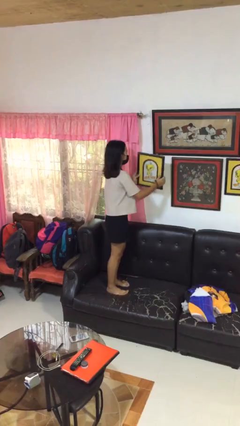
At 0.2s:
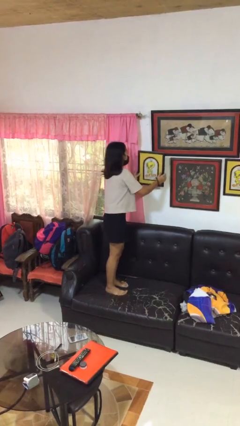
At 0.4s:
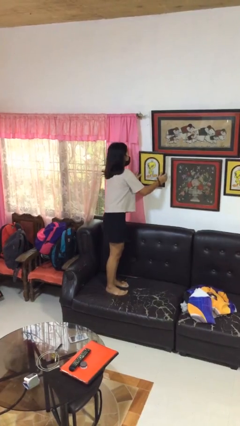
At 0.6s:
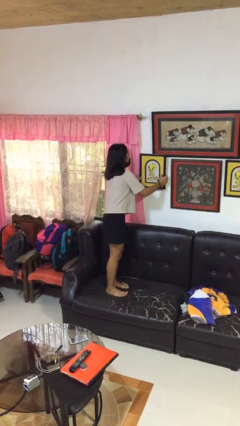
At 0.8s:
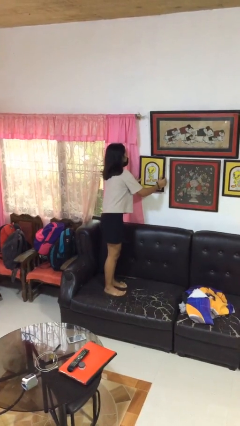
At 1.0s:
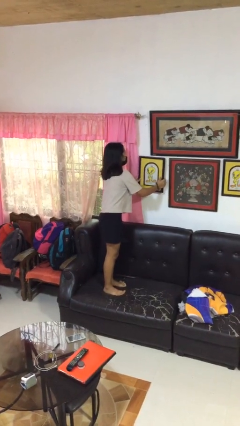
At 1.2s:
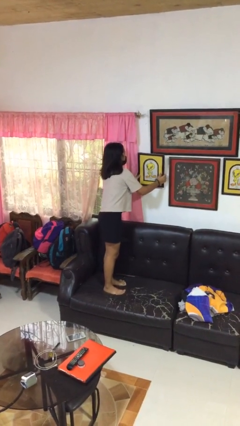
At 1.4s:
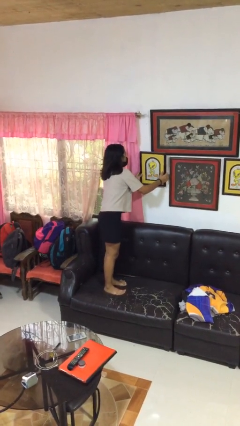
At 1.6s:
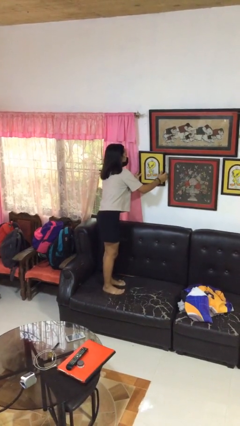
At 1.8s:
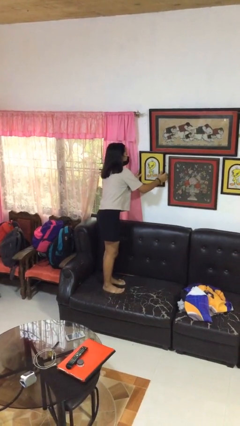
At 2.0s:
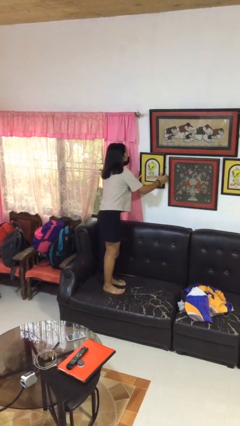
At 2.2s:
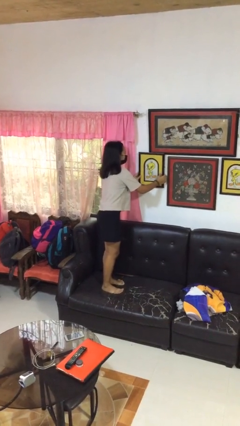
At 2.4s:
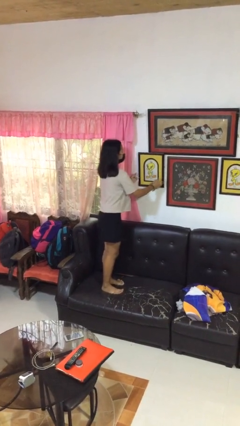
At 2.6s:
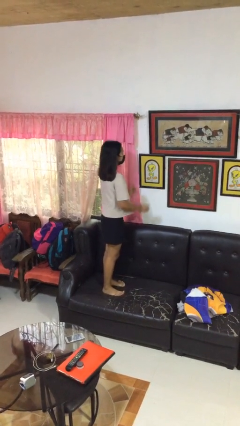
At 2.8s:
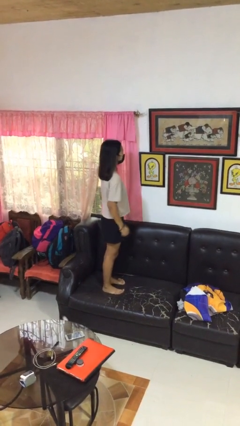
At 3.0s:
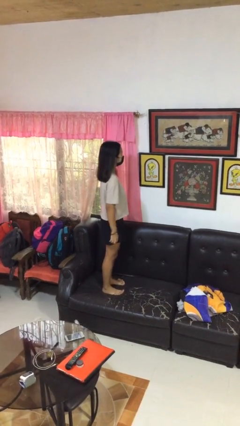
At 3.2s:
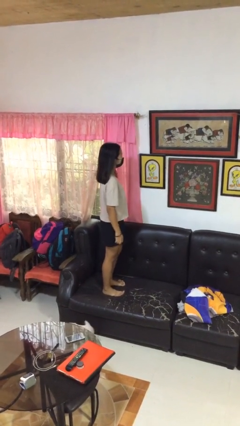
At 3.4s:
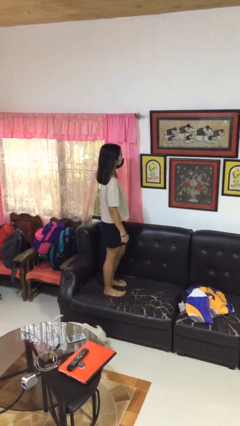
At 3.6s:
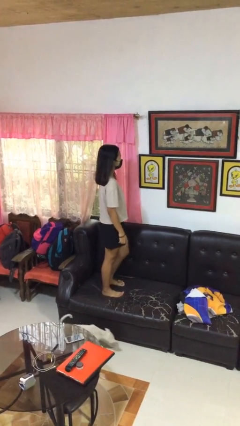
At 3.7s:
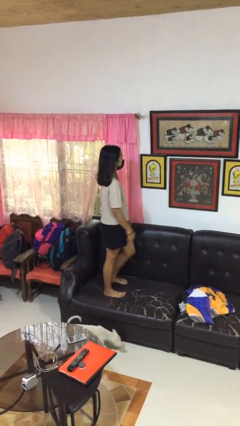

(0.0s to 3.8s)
person puts up picture frame

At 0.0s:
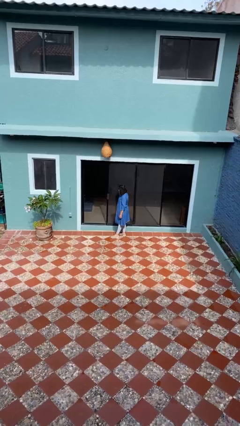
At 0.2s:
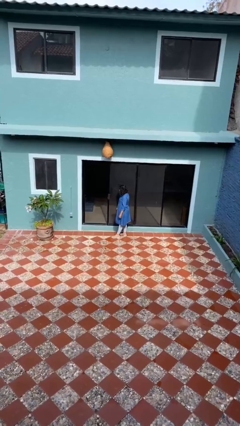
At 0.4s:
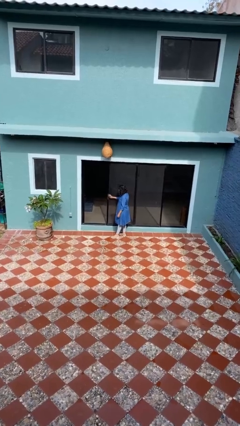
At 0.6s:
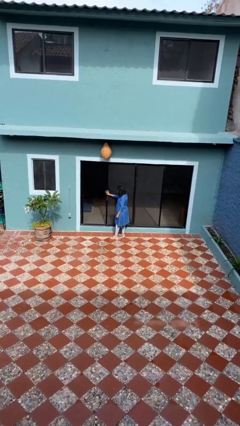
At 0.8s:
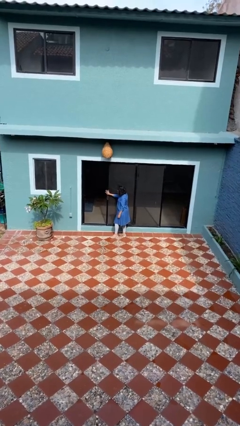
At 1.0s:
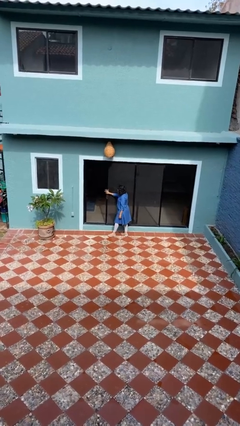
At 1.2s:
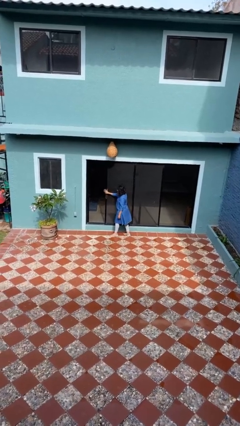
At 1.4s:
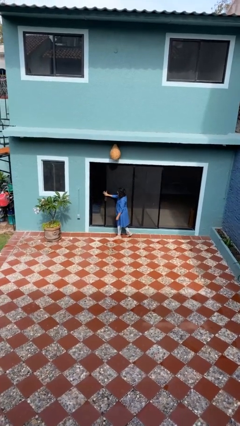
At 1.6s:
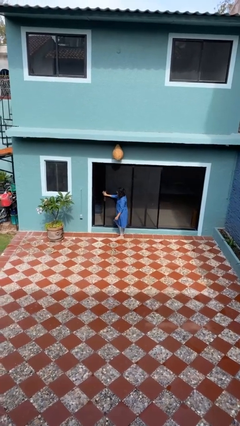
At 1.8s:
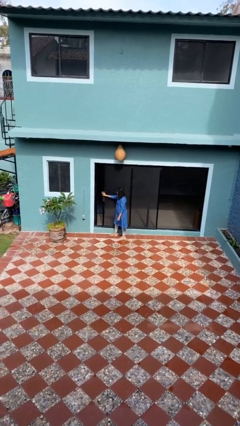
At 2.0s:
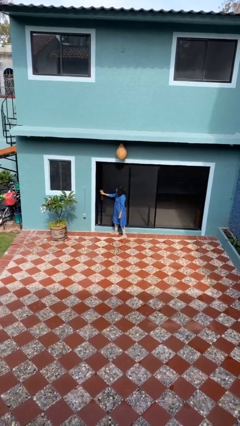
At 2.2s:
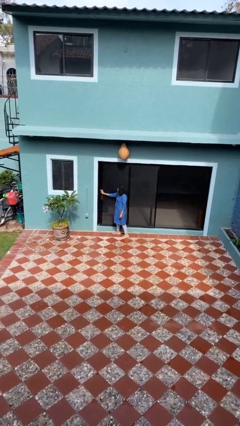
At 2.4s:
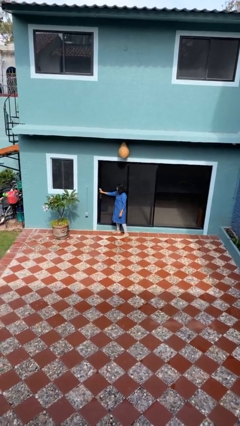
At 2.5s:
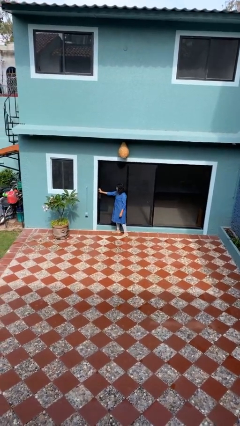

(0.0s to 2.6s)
person closes sliding door

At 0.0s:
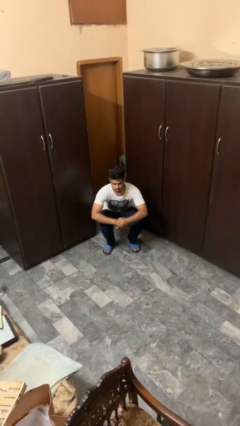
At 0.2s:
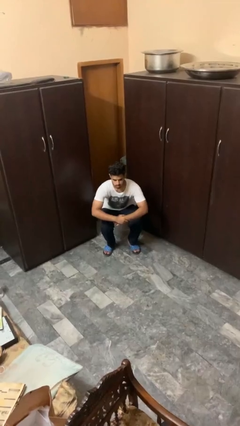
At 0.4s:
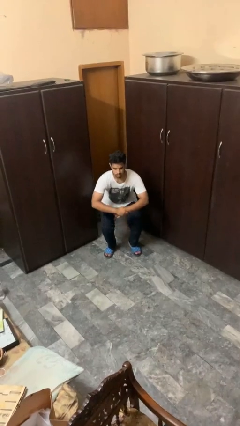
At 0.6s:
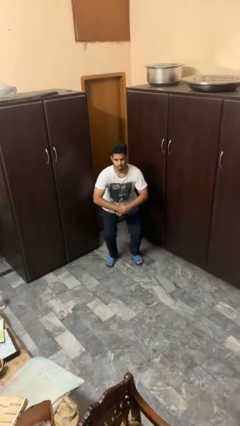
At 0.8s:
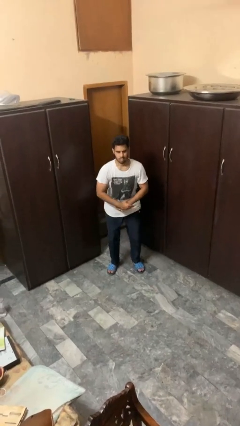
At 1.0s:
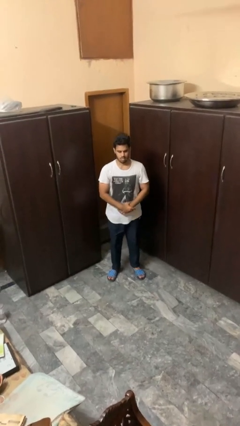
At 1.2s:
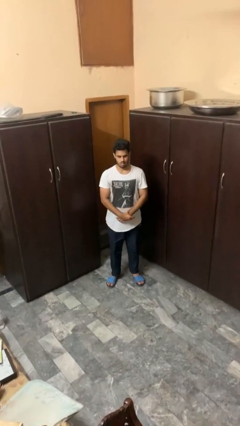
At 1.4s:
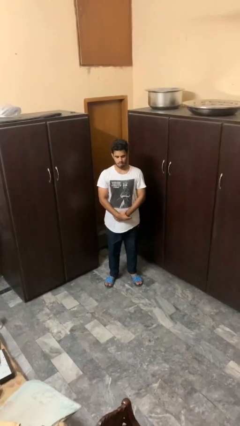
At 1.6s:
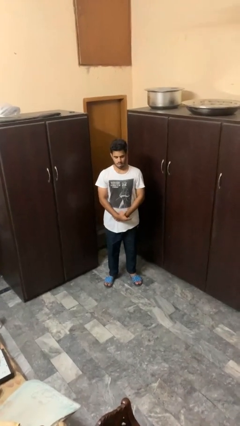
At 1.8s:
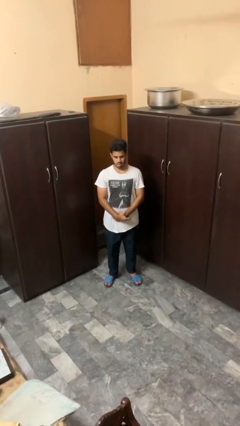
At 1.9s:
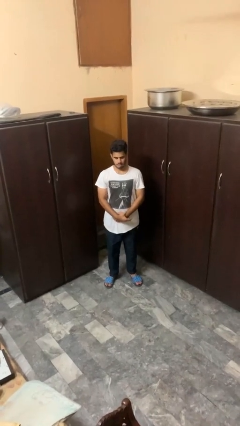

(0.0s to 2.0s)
person stands up

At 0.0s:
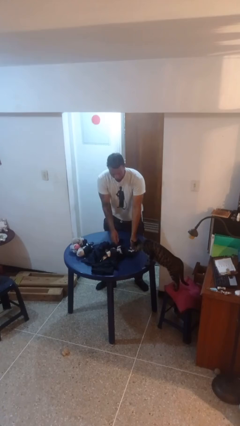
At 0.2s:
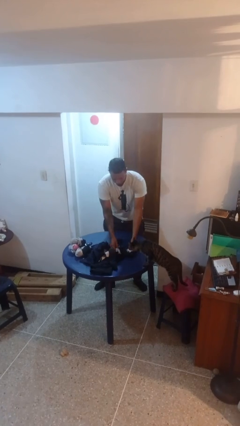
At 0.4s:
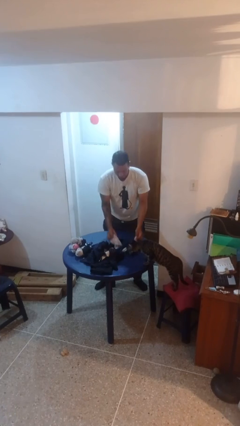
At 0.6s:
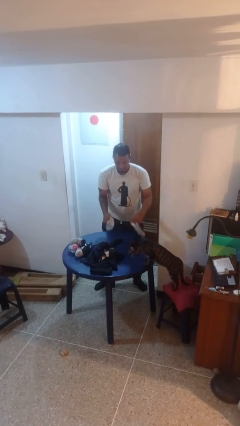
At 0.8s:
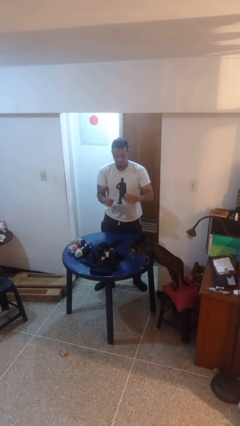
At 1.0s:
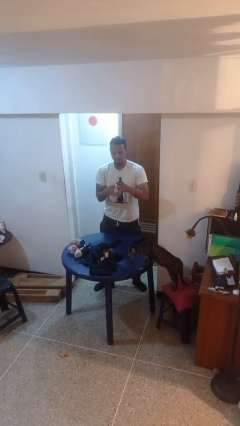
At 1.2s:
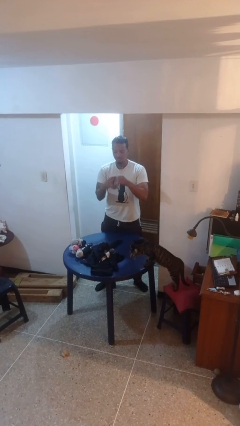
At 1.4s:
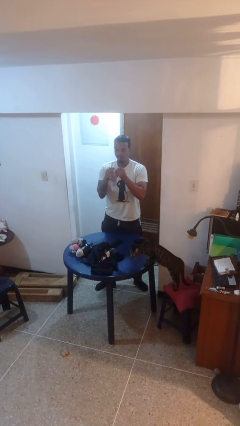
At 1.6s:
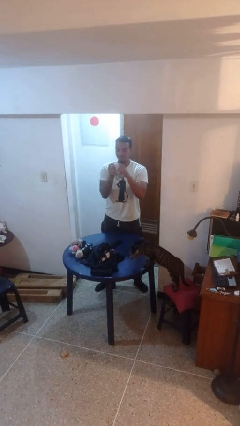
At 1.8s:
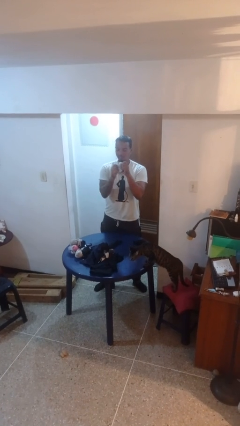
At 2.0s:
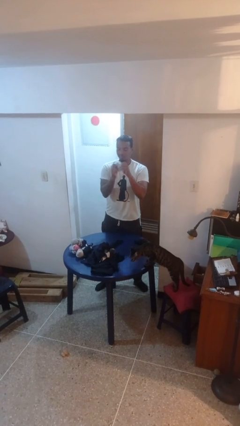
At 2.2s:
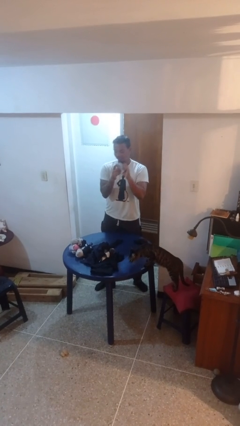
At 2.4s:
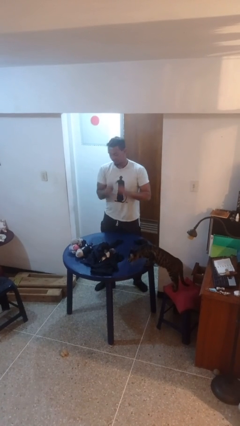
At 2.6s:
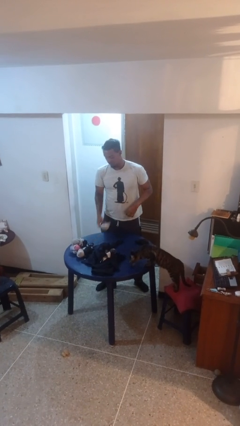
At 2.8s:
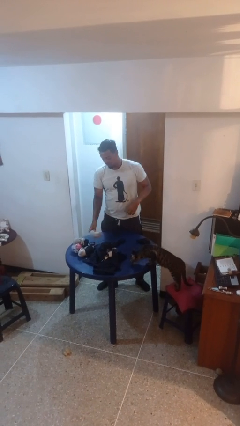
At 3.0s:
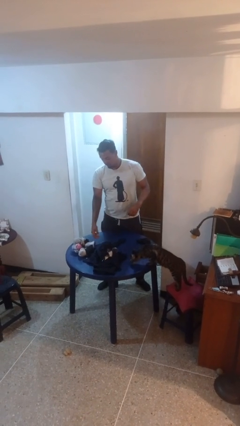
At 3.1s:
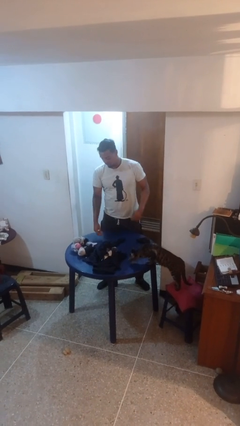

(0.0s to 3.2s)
person folds socks

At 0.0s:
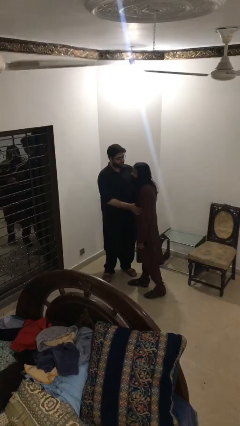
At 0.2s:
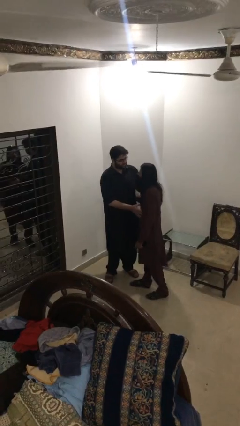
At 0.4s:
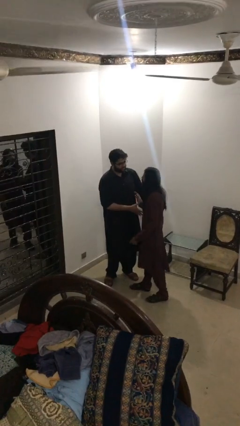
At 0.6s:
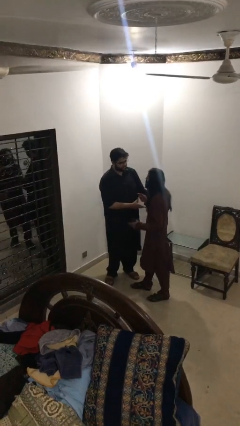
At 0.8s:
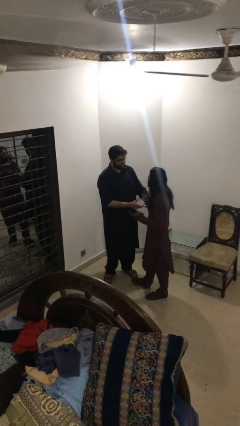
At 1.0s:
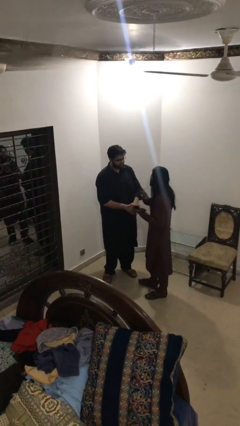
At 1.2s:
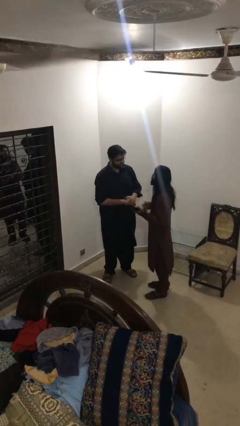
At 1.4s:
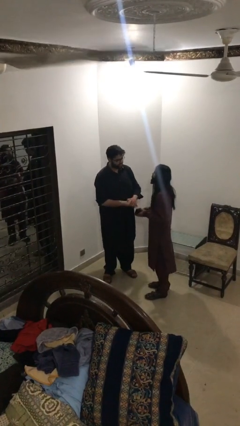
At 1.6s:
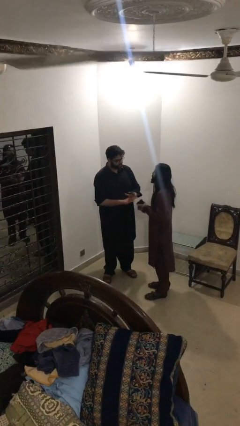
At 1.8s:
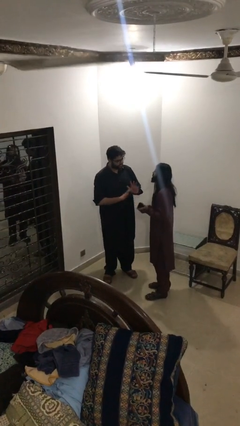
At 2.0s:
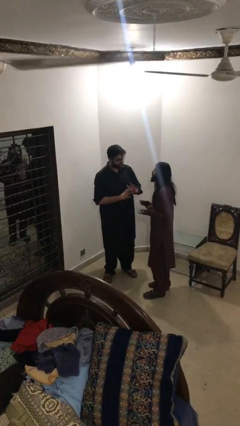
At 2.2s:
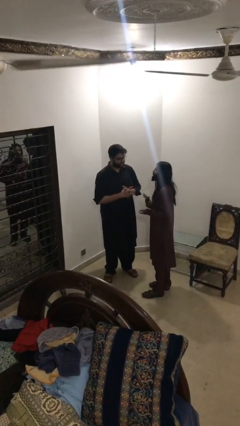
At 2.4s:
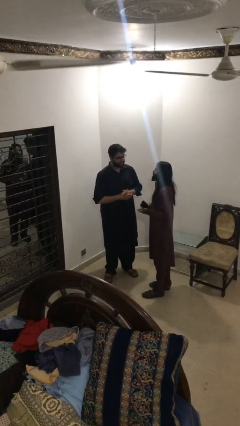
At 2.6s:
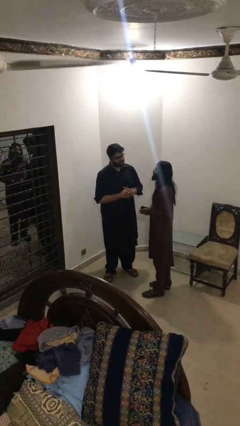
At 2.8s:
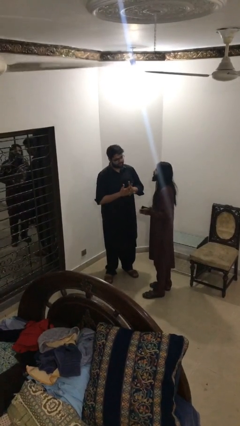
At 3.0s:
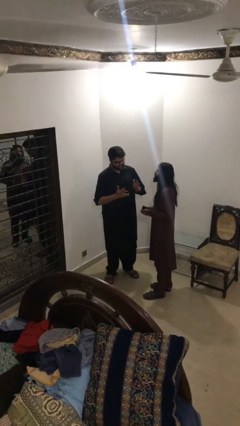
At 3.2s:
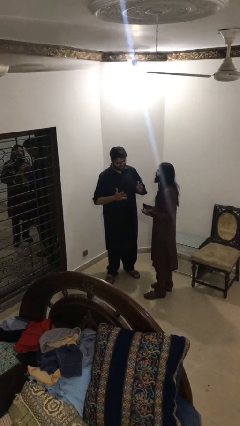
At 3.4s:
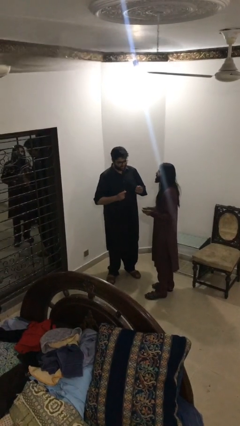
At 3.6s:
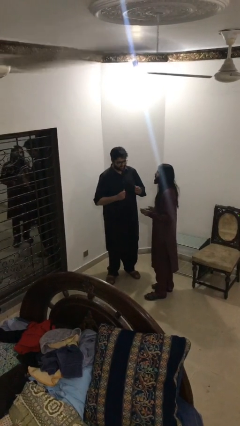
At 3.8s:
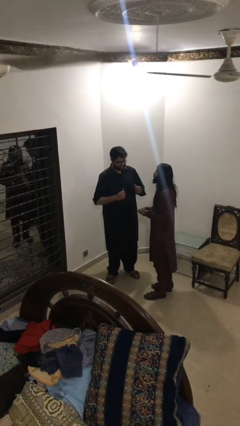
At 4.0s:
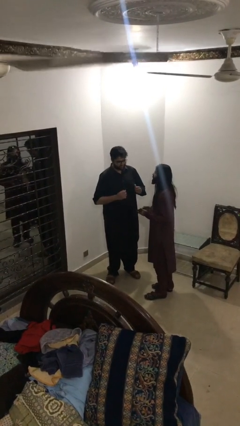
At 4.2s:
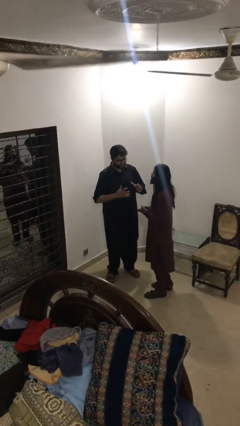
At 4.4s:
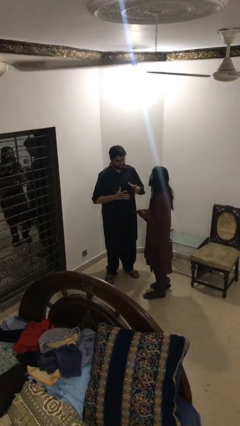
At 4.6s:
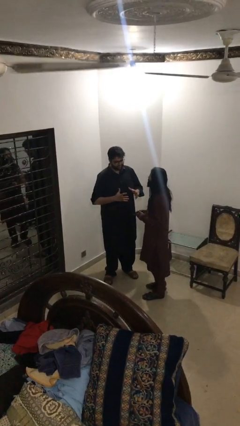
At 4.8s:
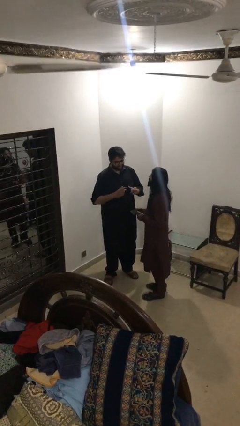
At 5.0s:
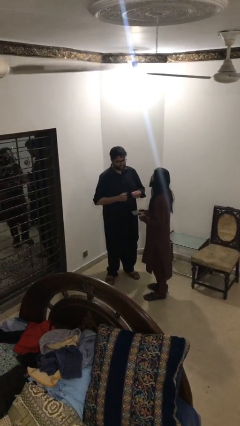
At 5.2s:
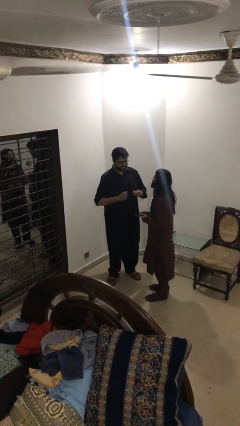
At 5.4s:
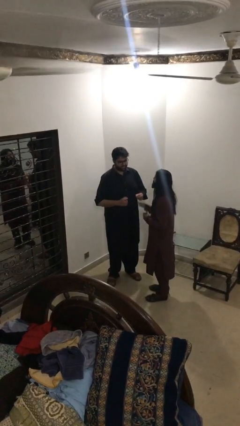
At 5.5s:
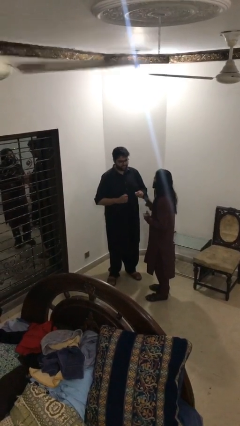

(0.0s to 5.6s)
person talks to person

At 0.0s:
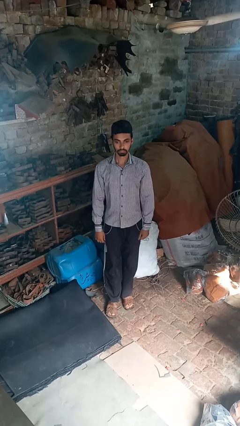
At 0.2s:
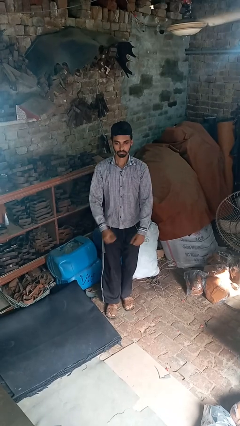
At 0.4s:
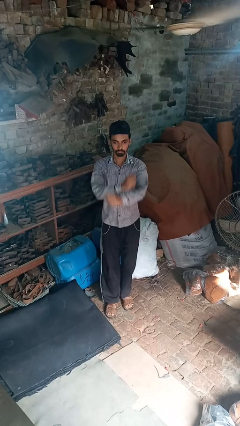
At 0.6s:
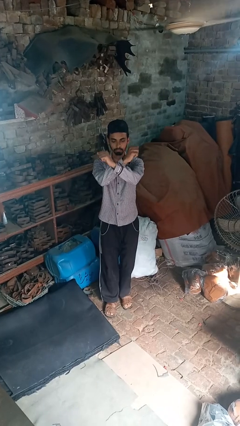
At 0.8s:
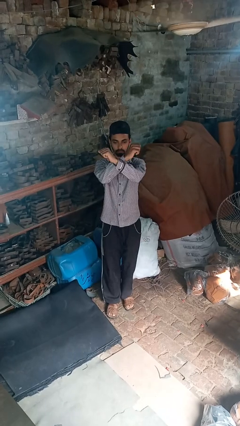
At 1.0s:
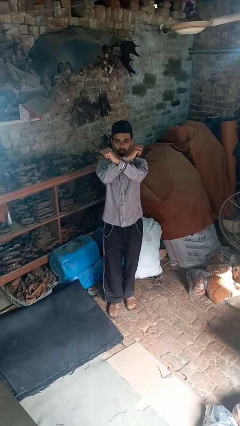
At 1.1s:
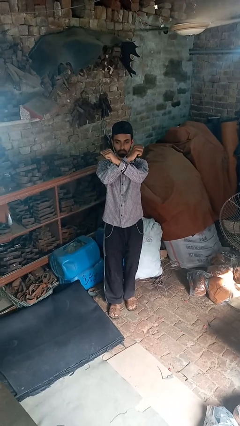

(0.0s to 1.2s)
person karate chop
